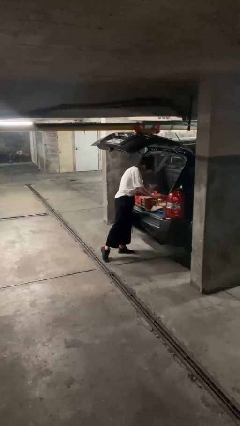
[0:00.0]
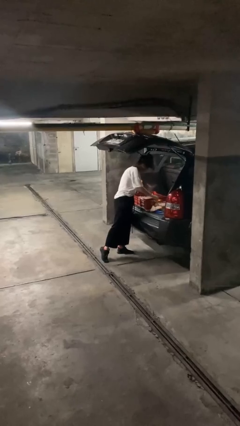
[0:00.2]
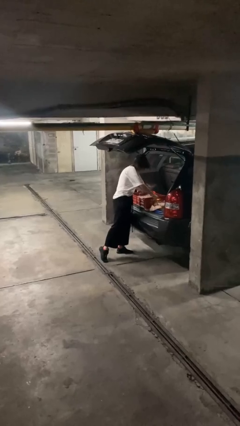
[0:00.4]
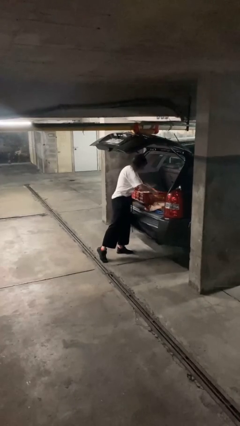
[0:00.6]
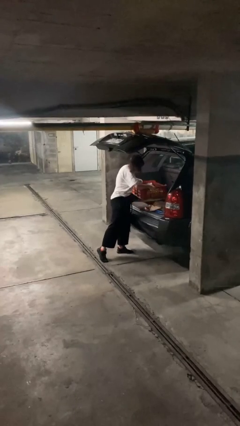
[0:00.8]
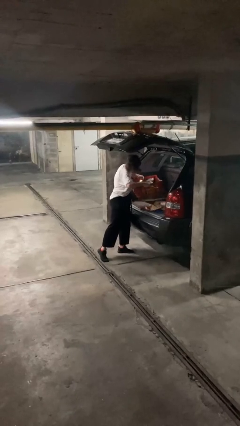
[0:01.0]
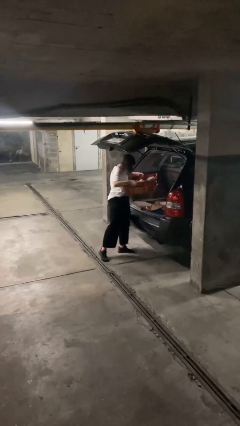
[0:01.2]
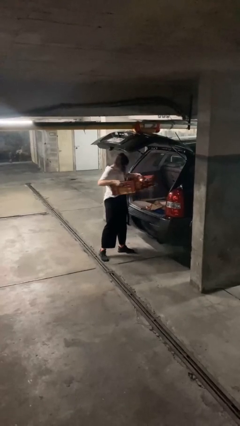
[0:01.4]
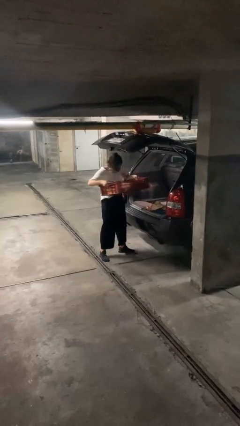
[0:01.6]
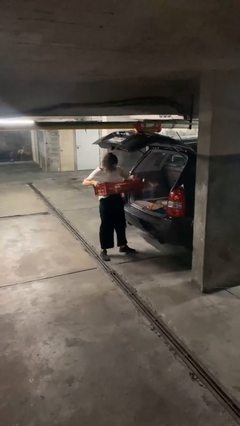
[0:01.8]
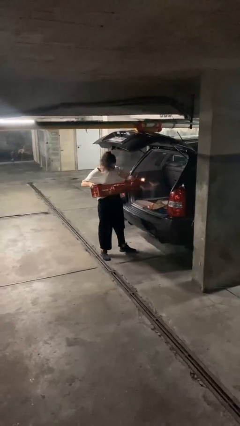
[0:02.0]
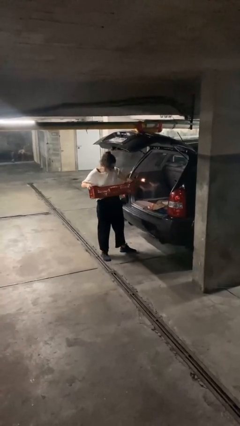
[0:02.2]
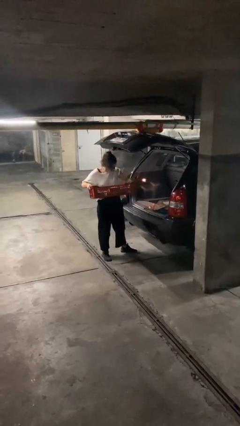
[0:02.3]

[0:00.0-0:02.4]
person unloads car

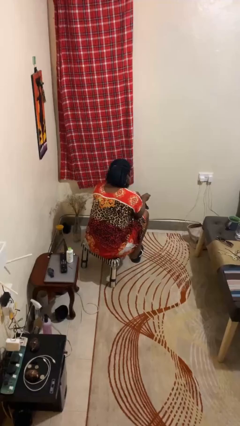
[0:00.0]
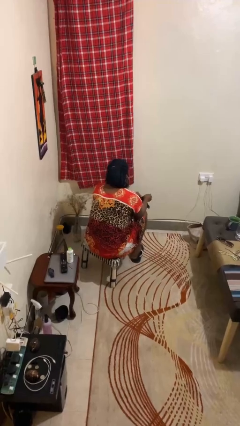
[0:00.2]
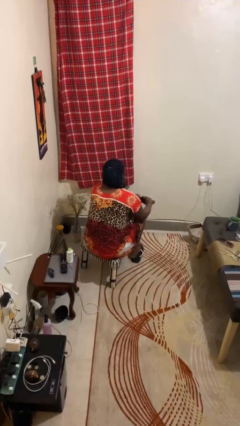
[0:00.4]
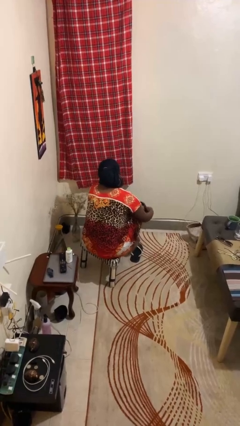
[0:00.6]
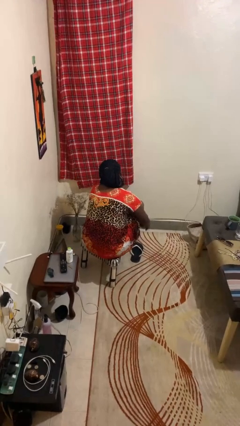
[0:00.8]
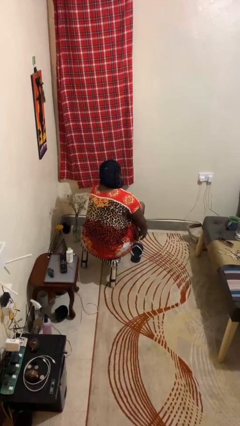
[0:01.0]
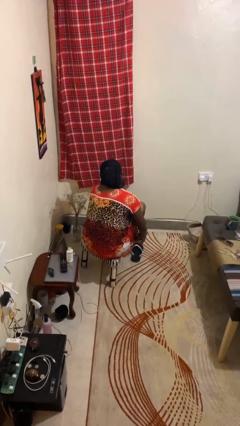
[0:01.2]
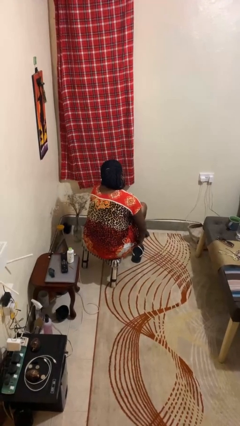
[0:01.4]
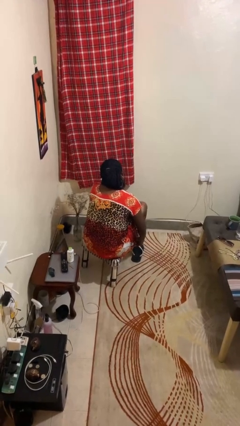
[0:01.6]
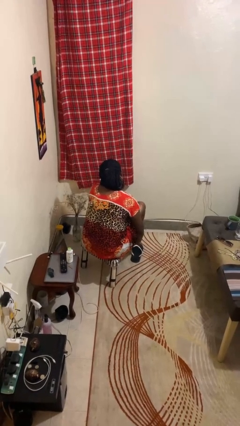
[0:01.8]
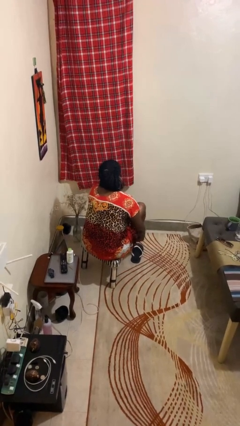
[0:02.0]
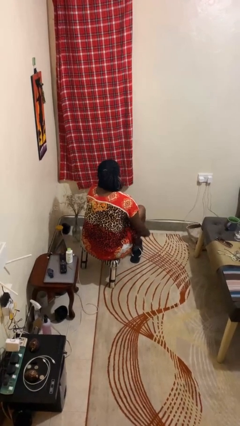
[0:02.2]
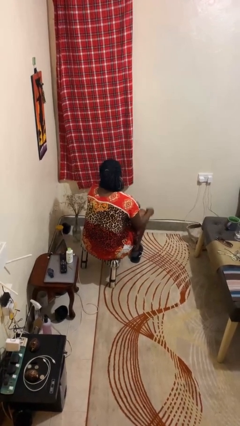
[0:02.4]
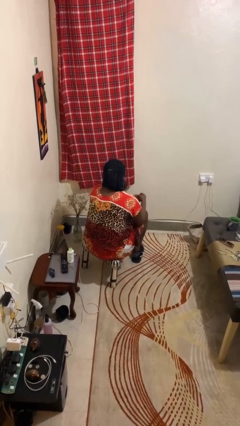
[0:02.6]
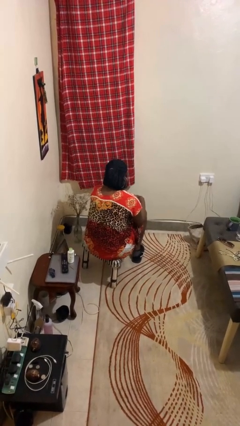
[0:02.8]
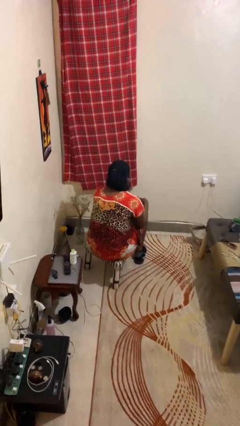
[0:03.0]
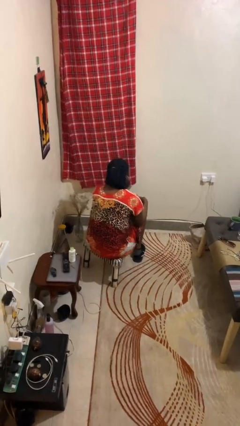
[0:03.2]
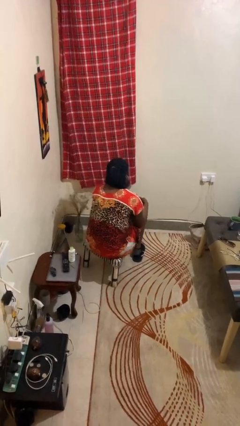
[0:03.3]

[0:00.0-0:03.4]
person puts on socks

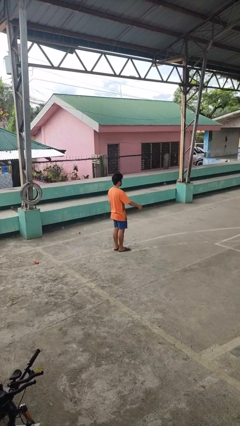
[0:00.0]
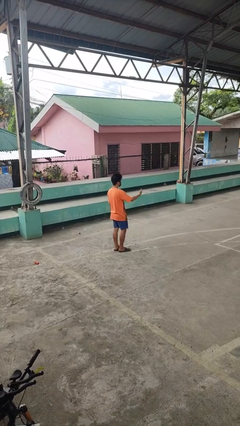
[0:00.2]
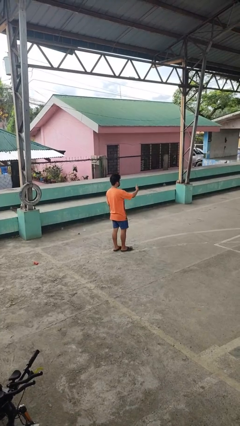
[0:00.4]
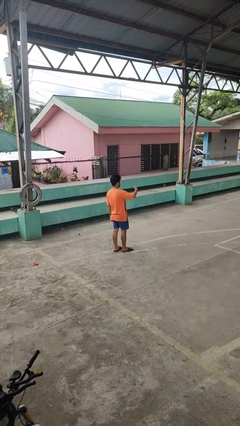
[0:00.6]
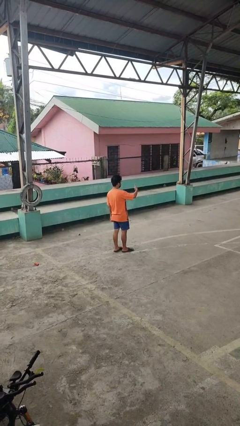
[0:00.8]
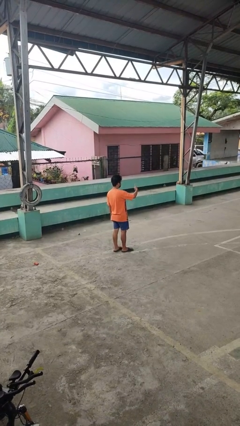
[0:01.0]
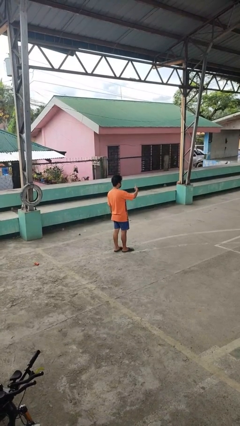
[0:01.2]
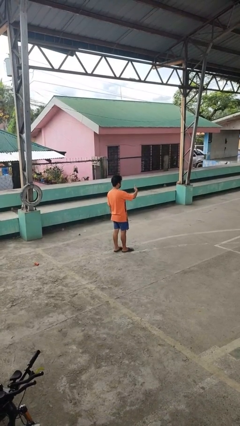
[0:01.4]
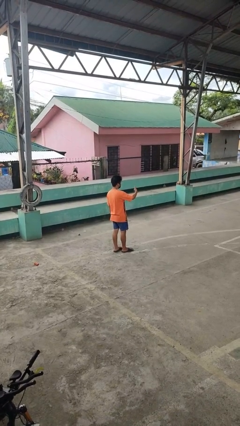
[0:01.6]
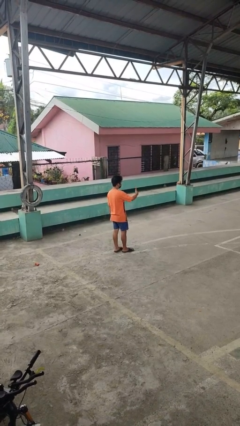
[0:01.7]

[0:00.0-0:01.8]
person gestures thumbs up

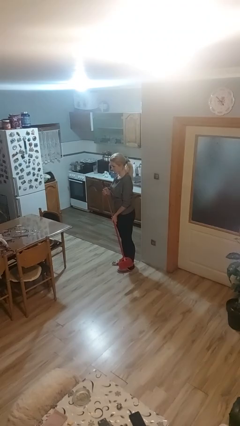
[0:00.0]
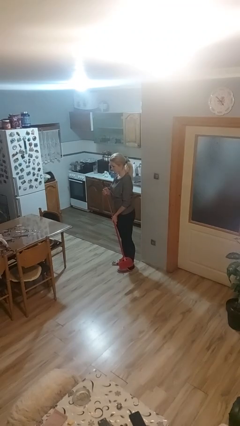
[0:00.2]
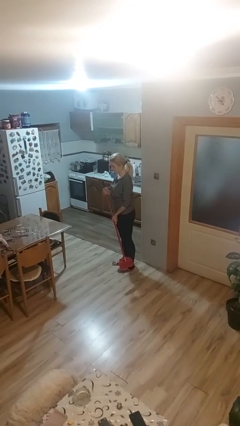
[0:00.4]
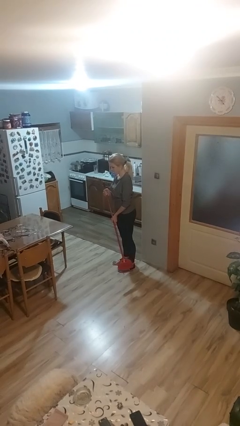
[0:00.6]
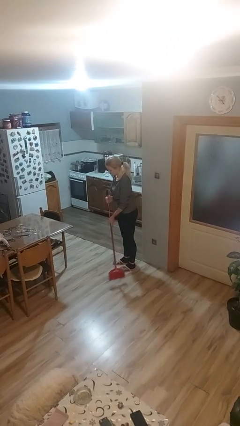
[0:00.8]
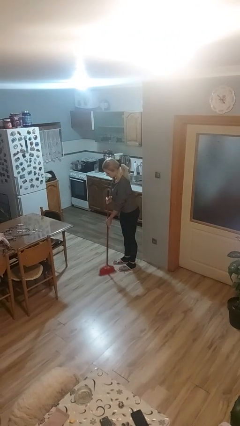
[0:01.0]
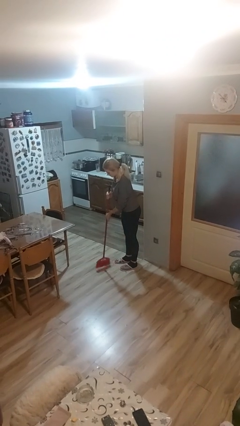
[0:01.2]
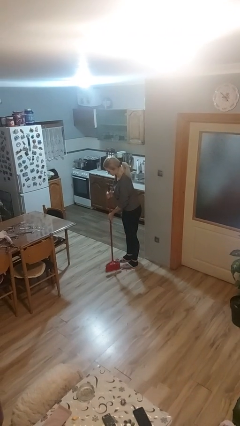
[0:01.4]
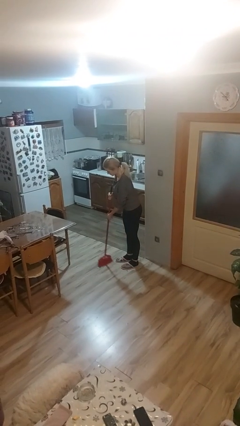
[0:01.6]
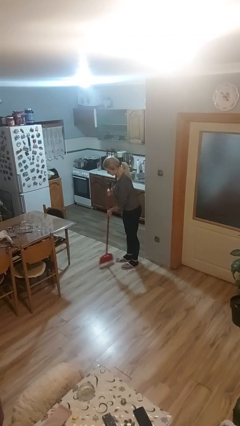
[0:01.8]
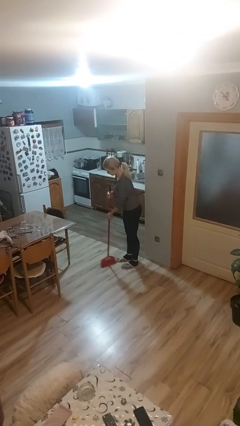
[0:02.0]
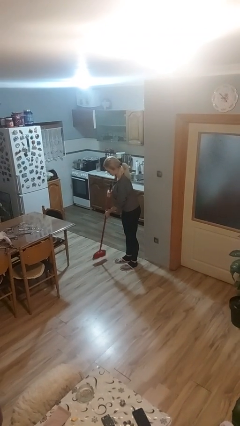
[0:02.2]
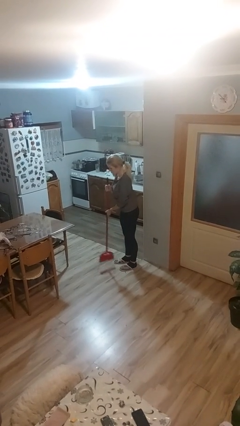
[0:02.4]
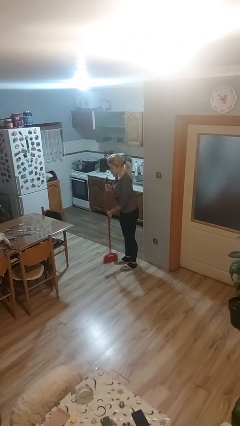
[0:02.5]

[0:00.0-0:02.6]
person sweeps floor

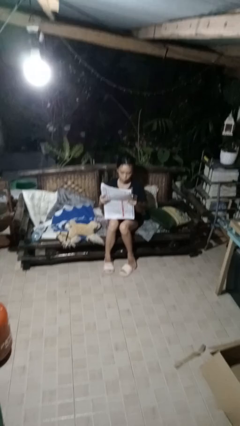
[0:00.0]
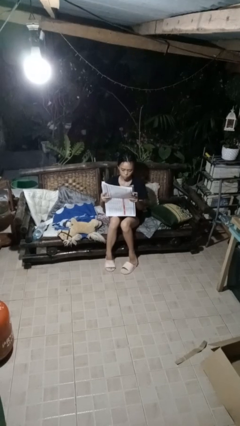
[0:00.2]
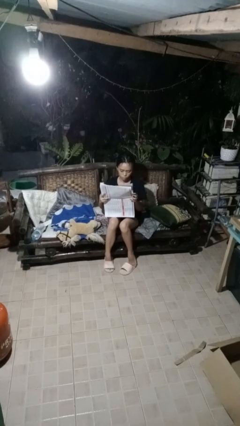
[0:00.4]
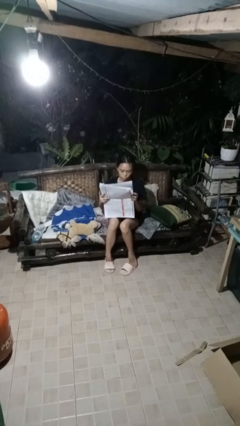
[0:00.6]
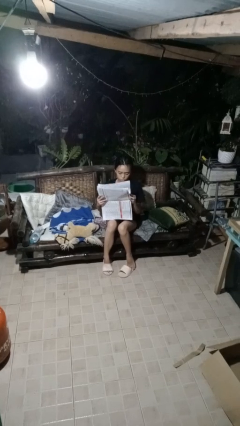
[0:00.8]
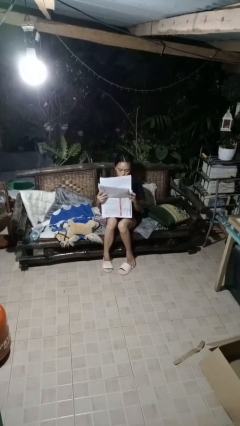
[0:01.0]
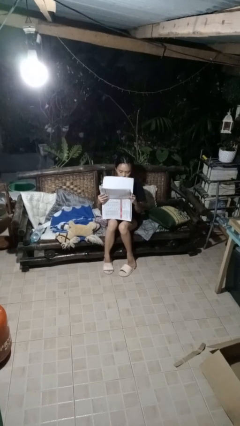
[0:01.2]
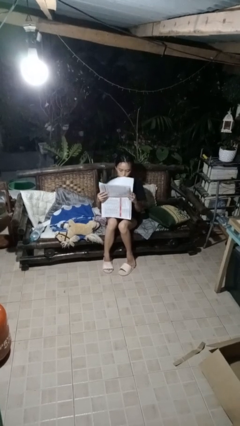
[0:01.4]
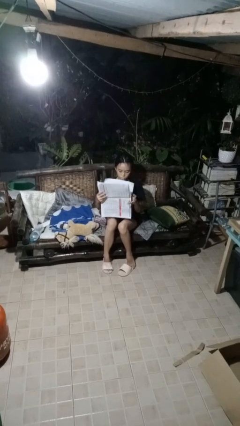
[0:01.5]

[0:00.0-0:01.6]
person reads newspaper

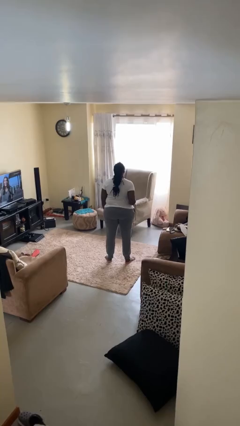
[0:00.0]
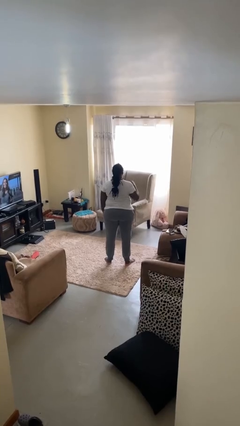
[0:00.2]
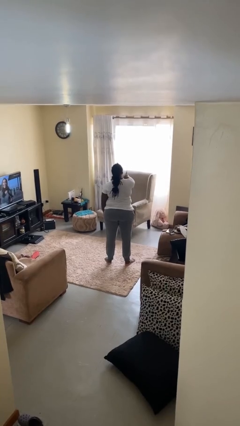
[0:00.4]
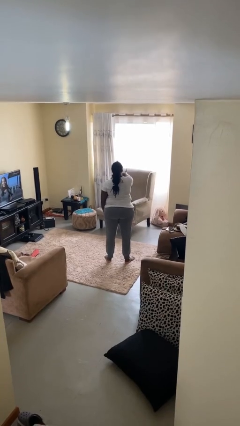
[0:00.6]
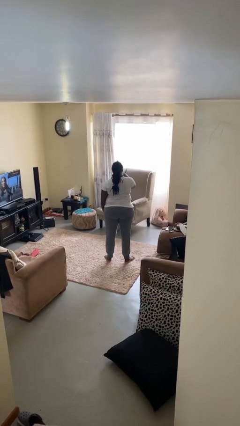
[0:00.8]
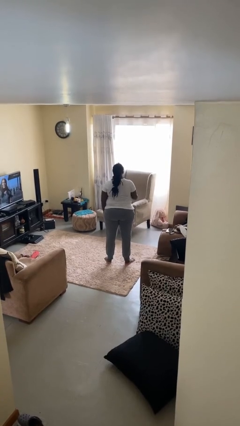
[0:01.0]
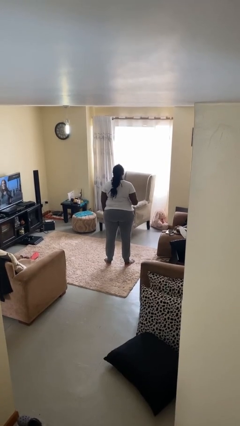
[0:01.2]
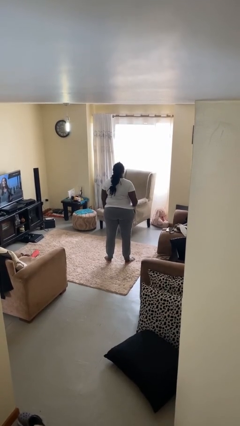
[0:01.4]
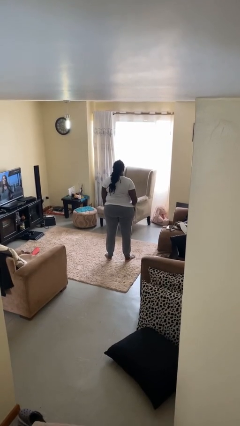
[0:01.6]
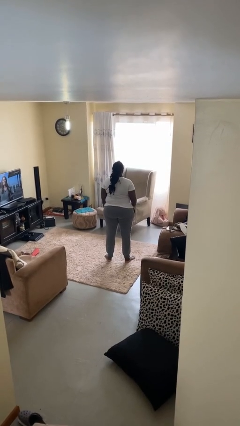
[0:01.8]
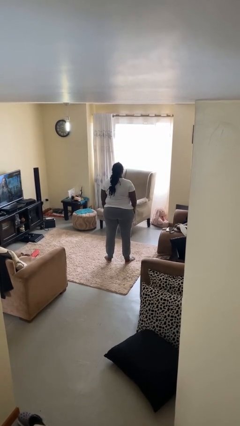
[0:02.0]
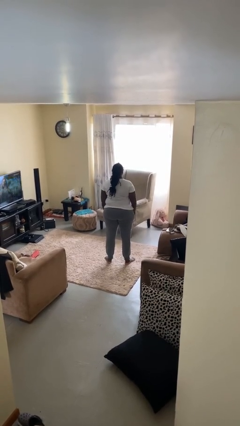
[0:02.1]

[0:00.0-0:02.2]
person punches

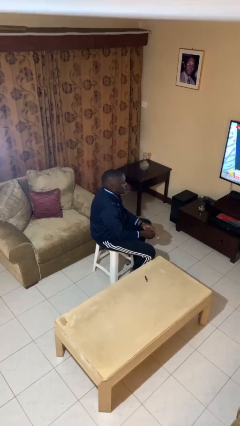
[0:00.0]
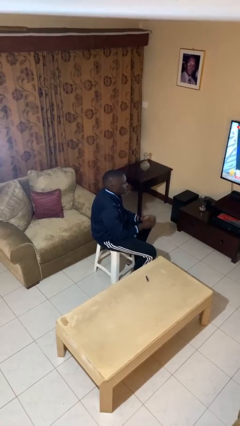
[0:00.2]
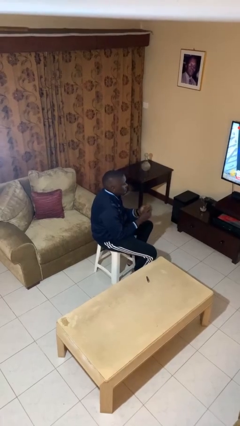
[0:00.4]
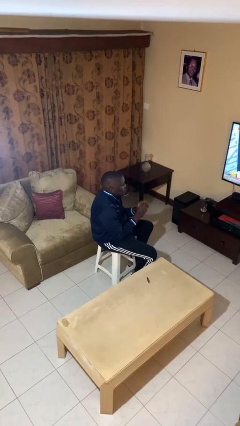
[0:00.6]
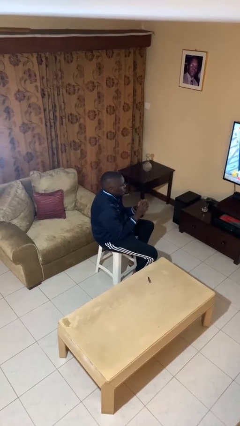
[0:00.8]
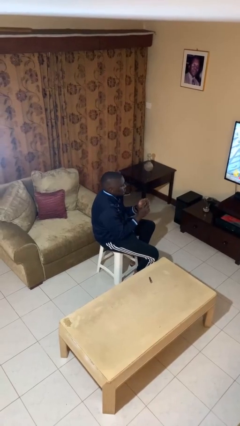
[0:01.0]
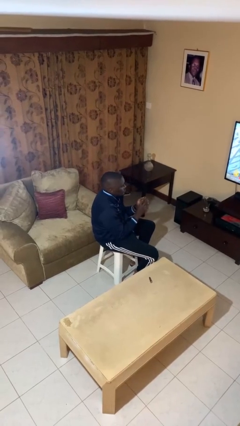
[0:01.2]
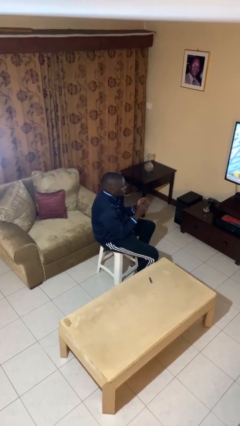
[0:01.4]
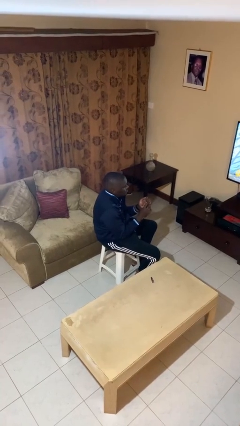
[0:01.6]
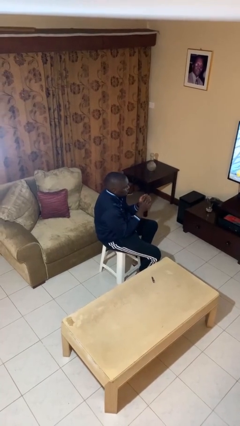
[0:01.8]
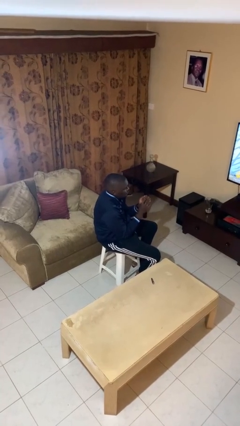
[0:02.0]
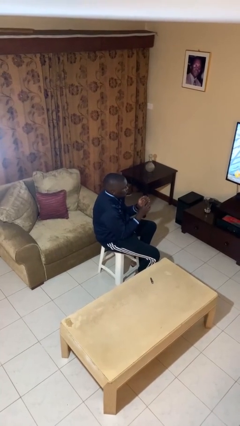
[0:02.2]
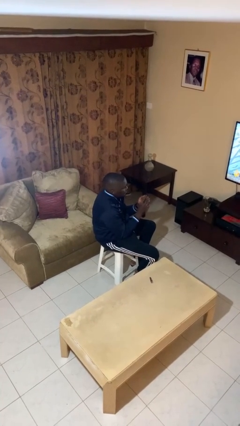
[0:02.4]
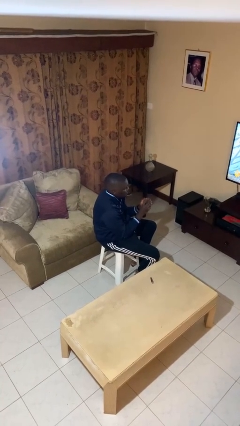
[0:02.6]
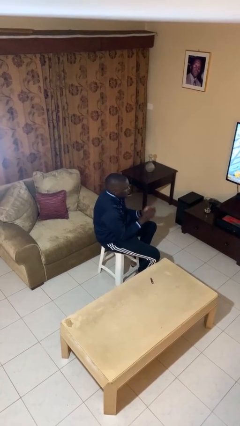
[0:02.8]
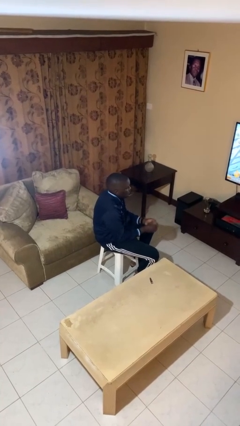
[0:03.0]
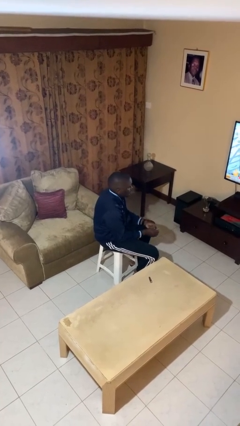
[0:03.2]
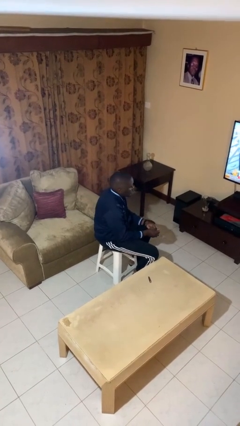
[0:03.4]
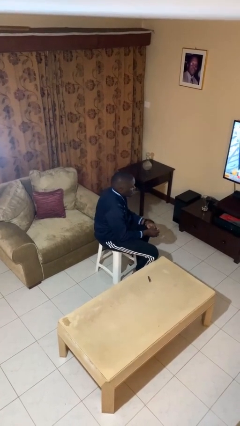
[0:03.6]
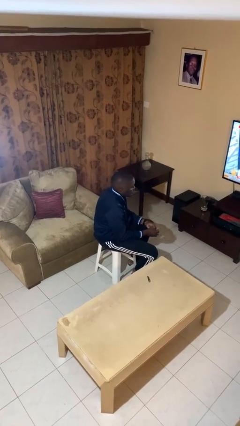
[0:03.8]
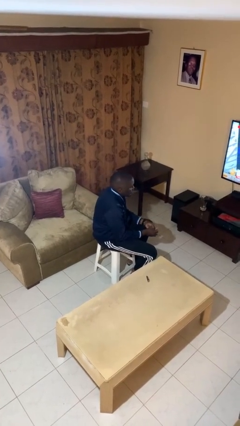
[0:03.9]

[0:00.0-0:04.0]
person files fingernails
